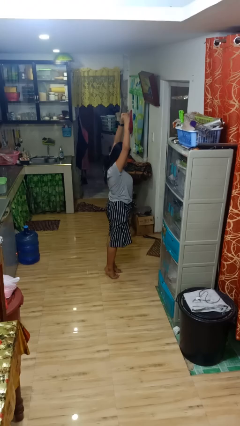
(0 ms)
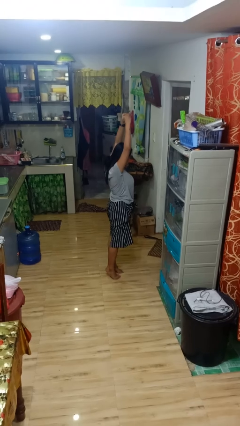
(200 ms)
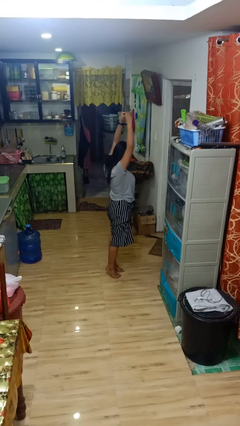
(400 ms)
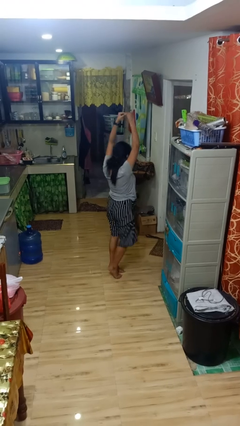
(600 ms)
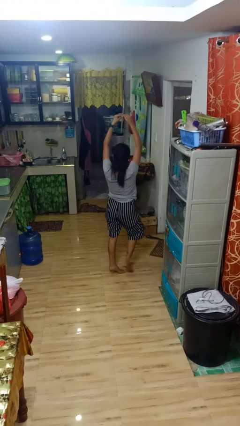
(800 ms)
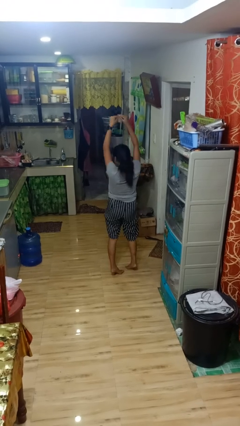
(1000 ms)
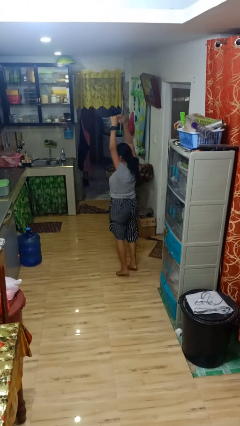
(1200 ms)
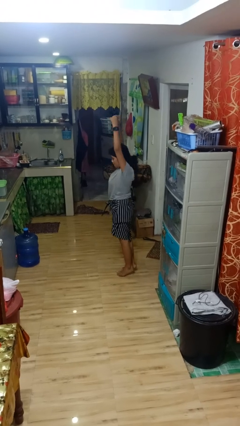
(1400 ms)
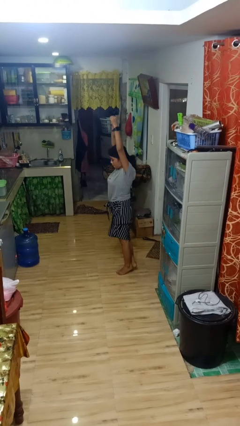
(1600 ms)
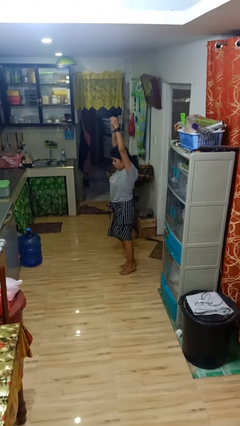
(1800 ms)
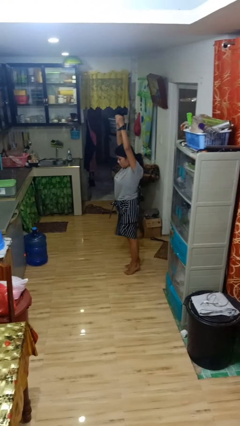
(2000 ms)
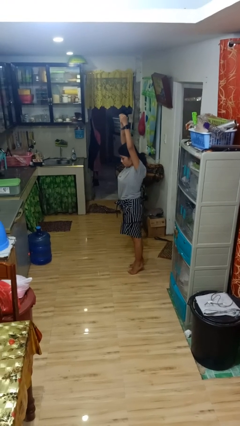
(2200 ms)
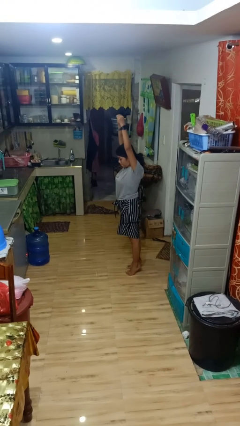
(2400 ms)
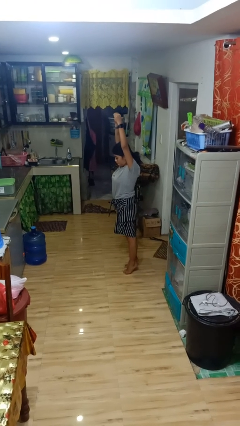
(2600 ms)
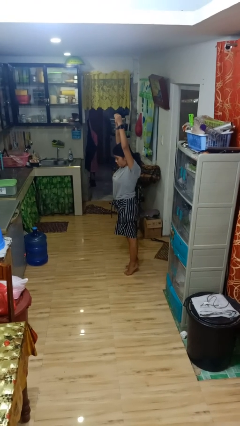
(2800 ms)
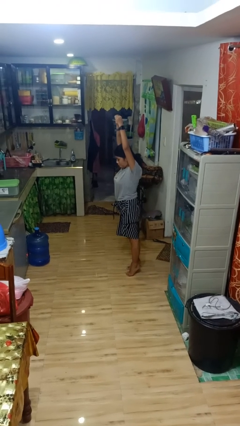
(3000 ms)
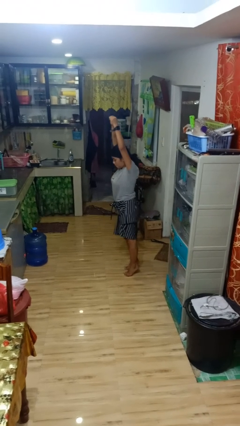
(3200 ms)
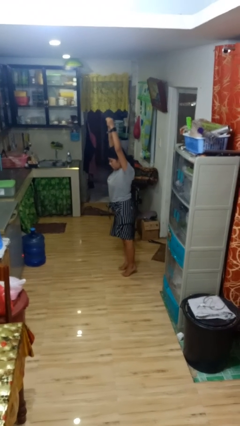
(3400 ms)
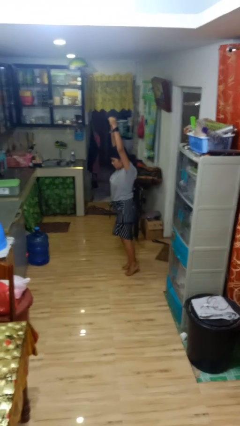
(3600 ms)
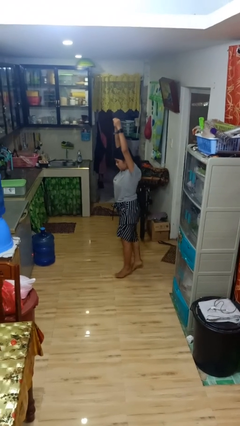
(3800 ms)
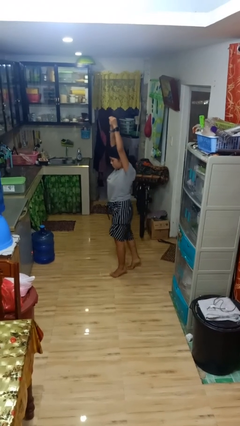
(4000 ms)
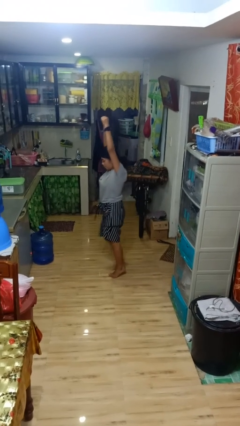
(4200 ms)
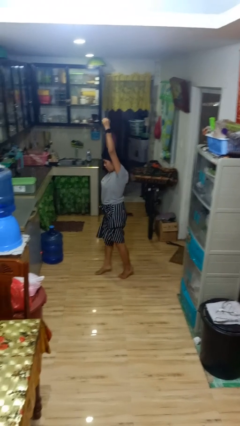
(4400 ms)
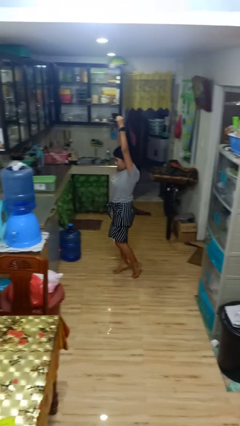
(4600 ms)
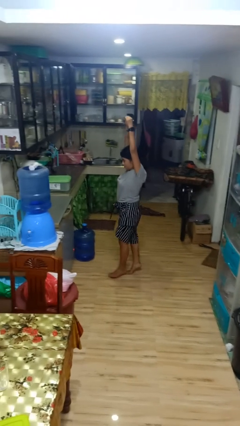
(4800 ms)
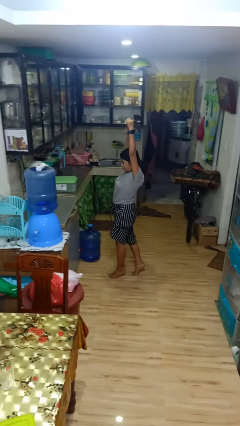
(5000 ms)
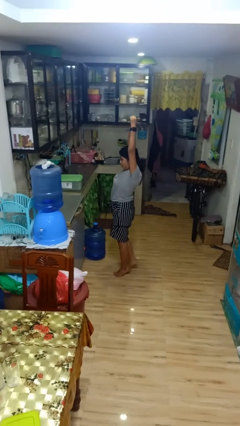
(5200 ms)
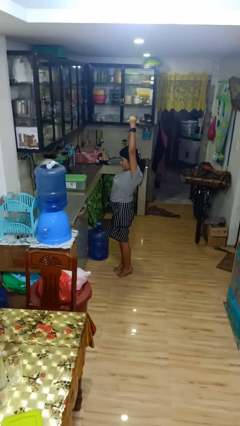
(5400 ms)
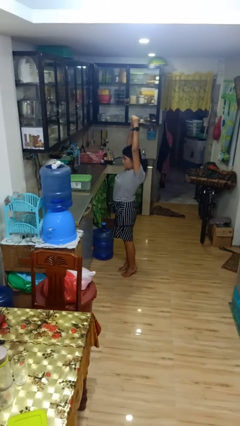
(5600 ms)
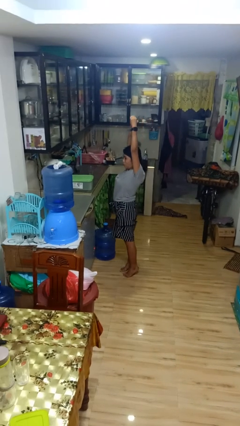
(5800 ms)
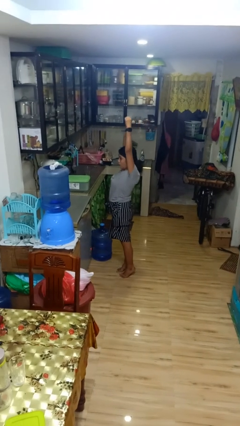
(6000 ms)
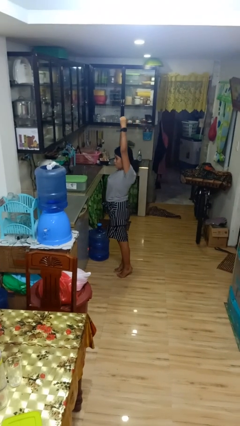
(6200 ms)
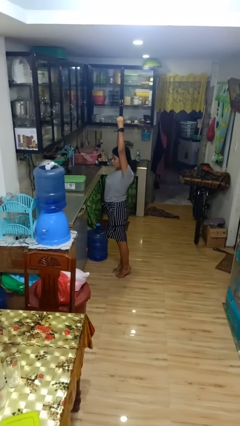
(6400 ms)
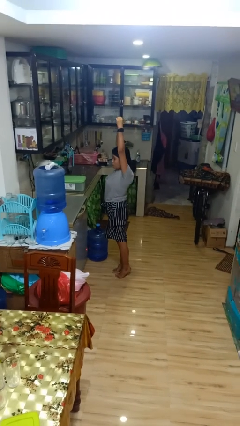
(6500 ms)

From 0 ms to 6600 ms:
person walks tiptoe

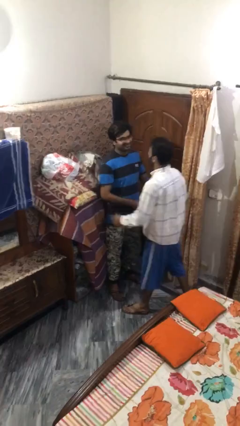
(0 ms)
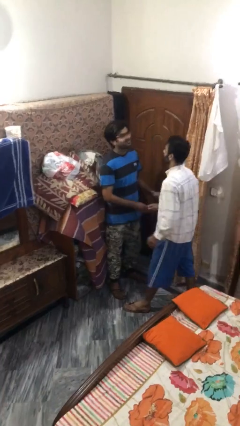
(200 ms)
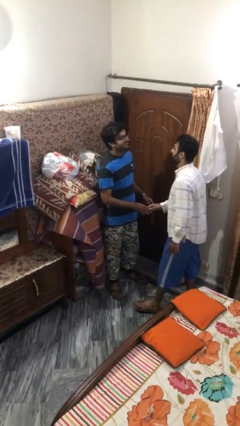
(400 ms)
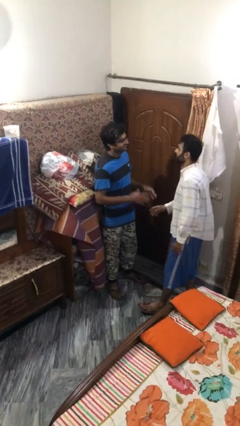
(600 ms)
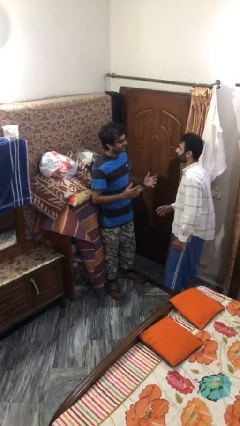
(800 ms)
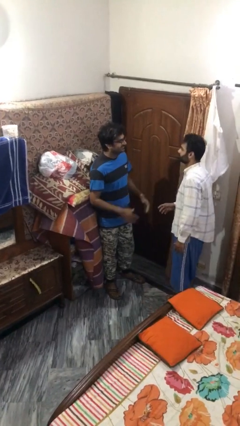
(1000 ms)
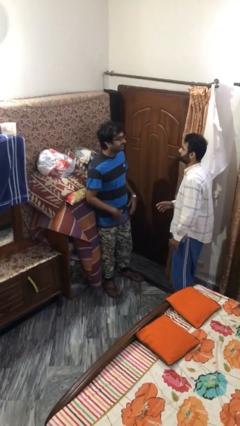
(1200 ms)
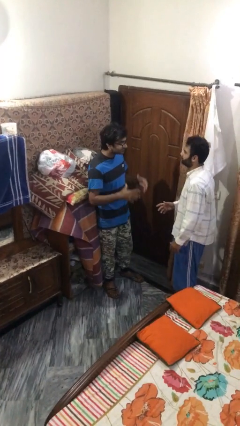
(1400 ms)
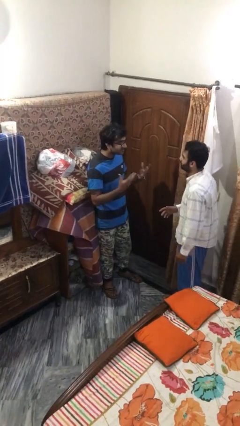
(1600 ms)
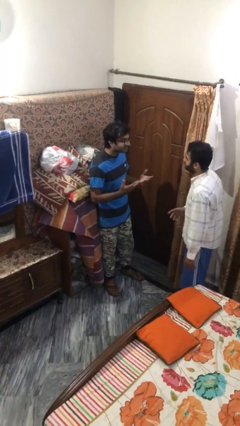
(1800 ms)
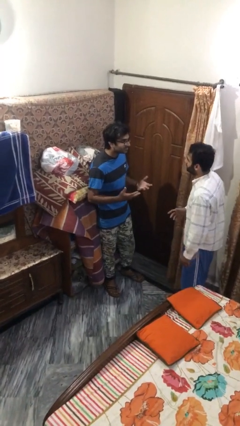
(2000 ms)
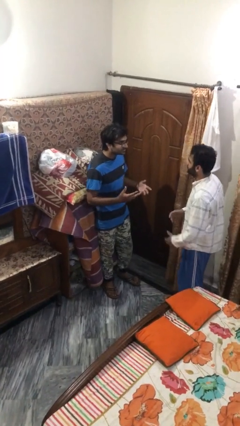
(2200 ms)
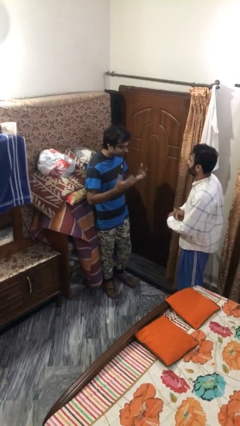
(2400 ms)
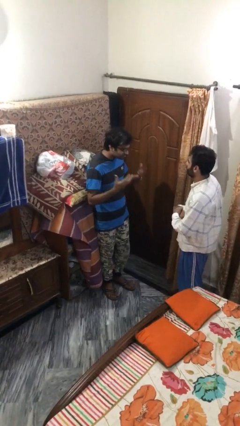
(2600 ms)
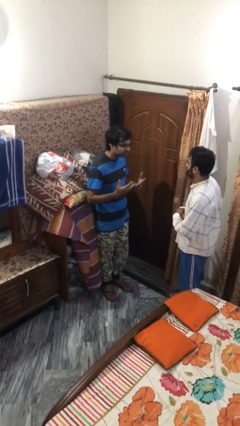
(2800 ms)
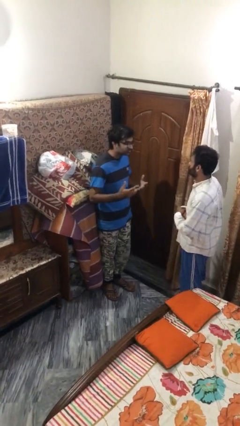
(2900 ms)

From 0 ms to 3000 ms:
person talks to person

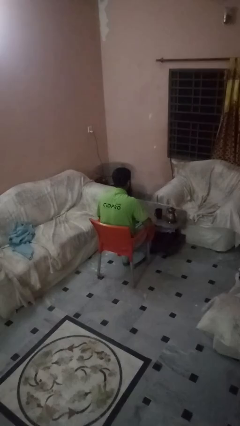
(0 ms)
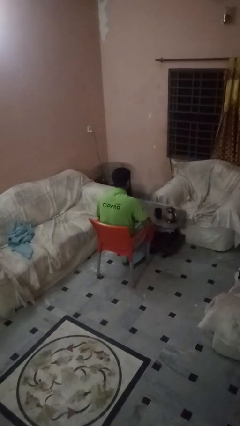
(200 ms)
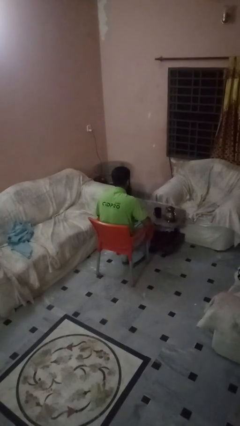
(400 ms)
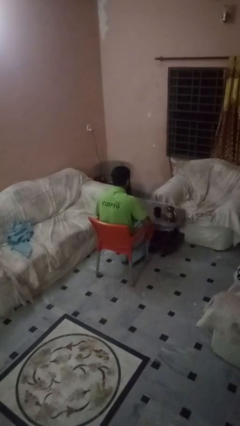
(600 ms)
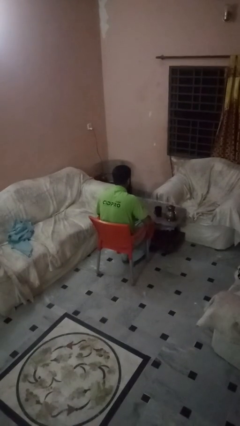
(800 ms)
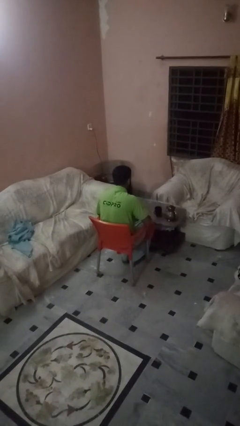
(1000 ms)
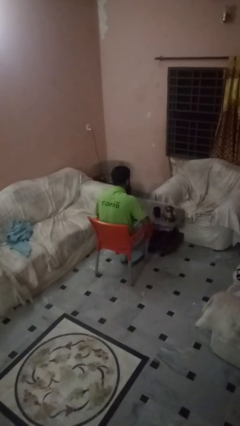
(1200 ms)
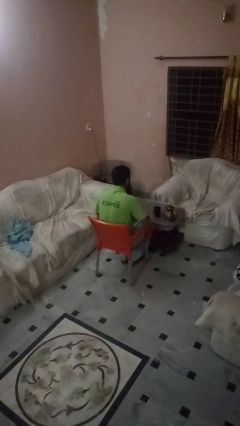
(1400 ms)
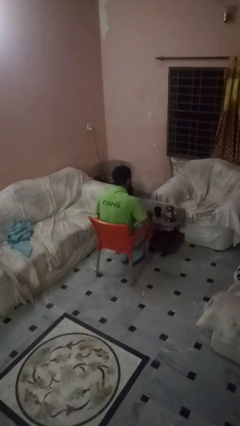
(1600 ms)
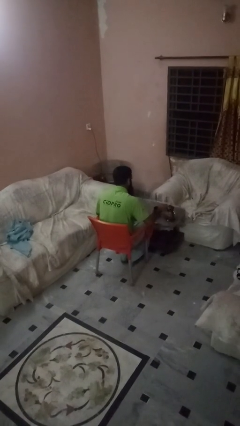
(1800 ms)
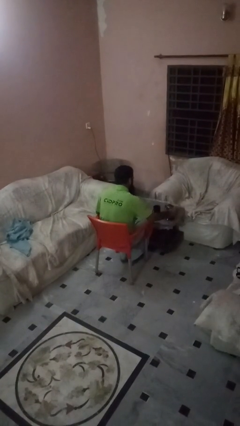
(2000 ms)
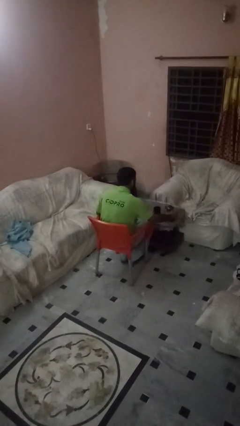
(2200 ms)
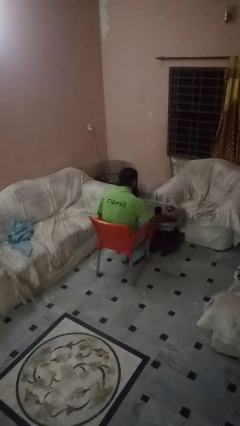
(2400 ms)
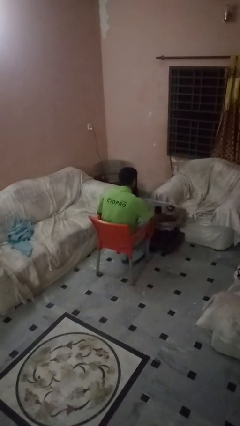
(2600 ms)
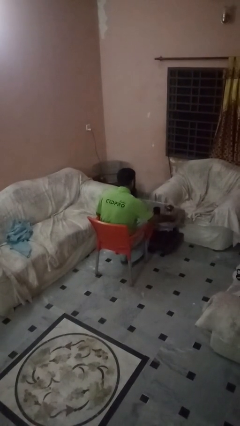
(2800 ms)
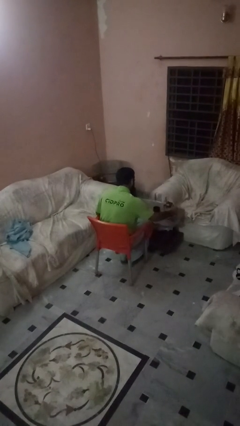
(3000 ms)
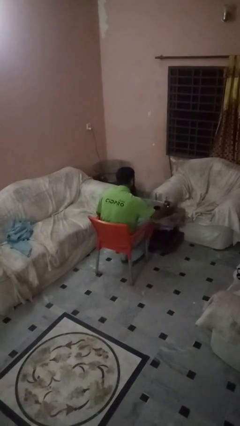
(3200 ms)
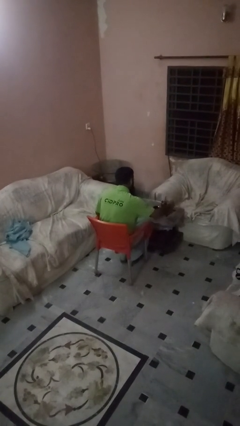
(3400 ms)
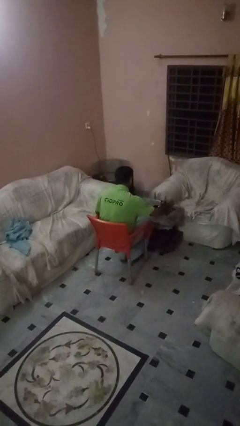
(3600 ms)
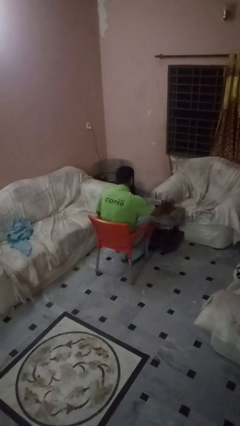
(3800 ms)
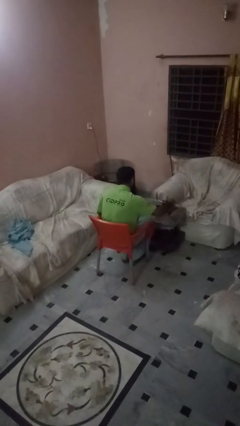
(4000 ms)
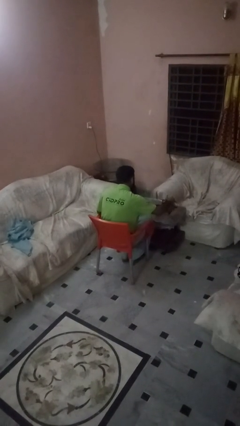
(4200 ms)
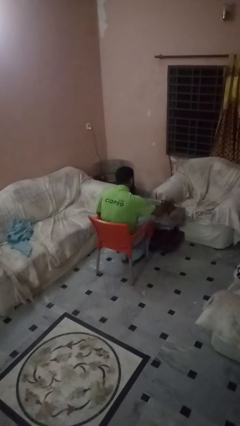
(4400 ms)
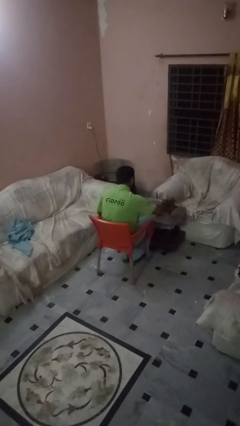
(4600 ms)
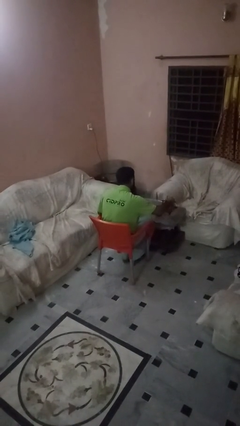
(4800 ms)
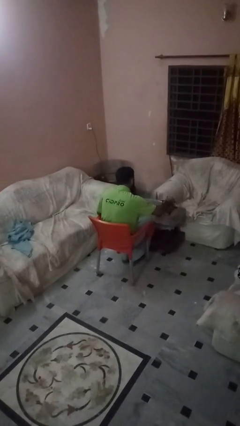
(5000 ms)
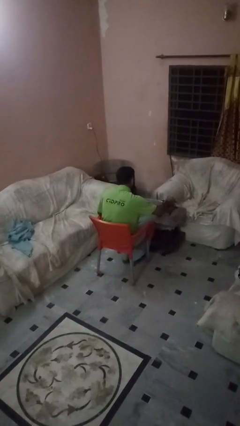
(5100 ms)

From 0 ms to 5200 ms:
person pours coffee into mug

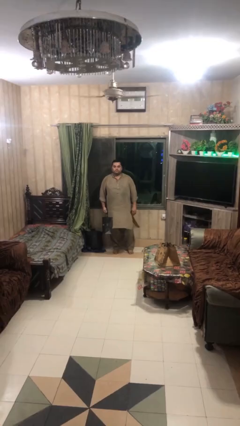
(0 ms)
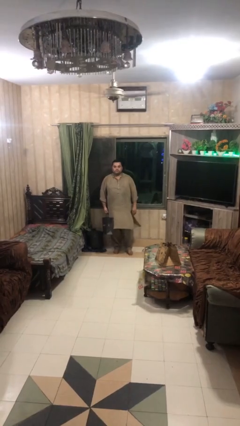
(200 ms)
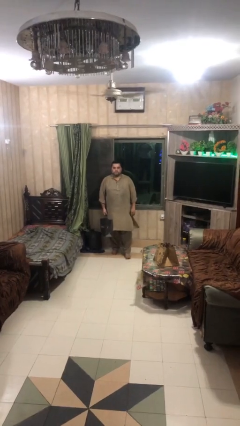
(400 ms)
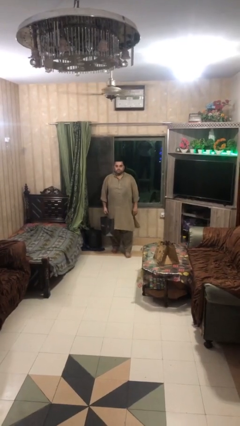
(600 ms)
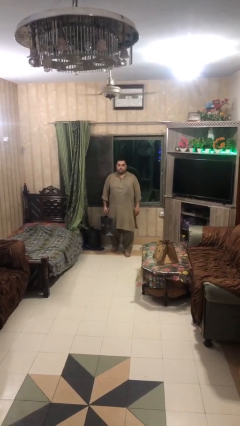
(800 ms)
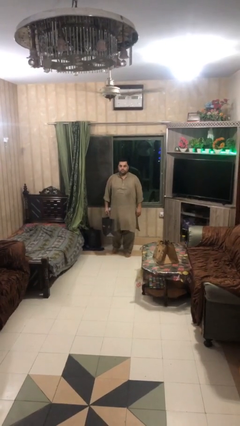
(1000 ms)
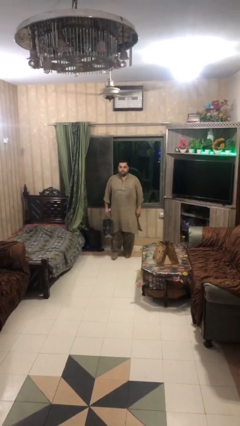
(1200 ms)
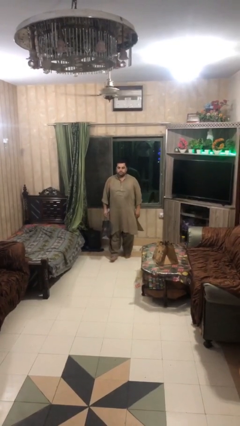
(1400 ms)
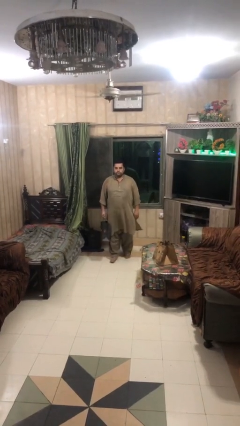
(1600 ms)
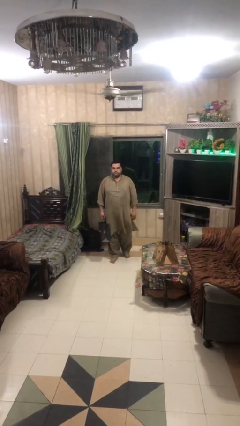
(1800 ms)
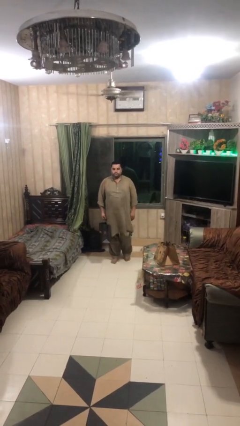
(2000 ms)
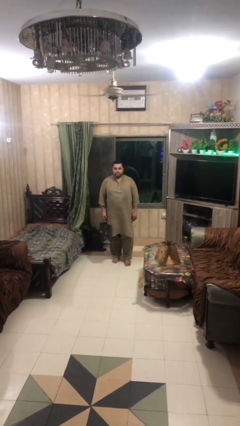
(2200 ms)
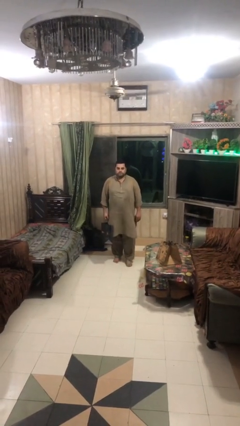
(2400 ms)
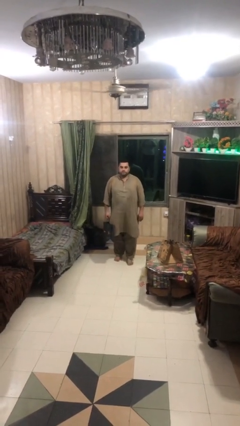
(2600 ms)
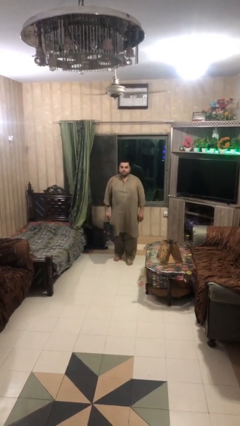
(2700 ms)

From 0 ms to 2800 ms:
person carries groceries

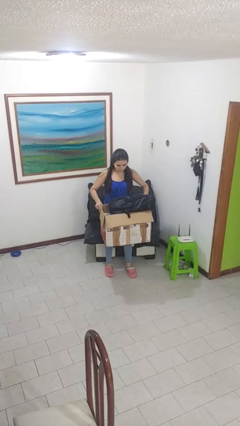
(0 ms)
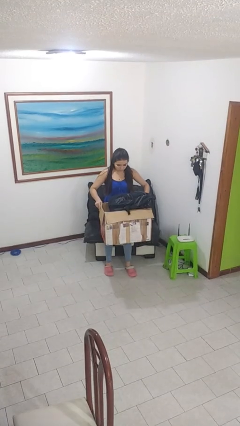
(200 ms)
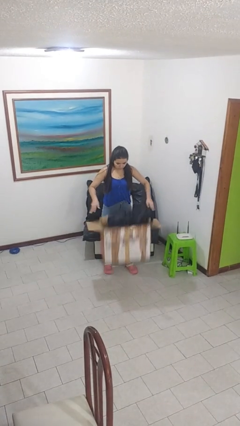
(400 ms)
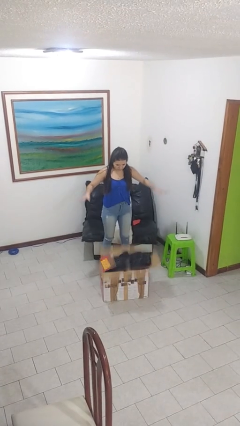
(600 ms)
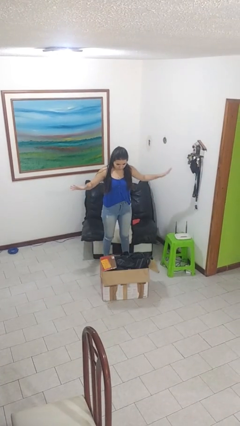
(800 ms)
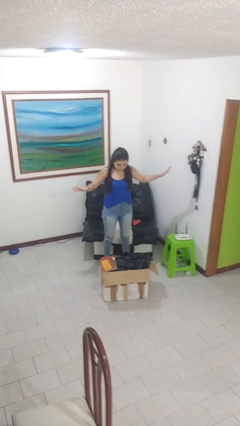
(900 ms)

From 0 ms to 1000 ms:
person unloads box onto floor
